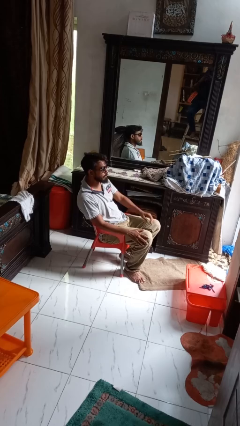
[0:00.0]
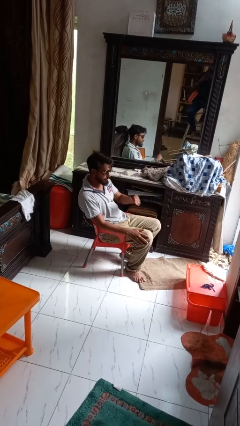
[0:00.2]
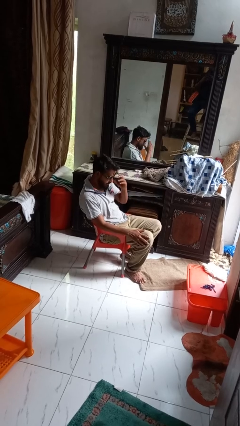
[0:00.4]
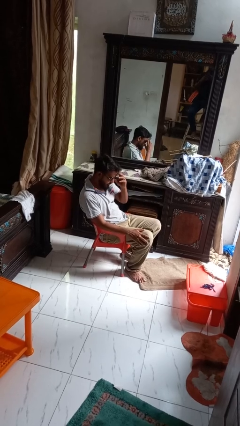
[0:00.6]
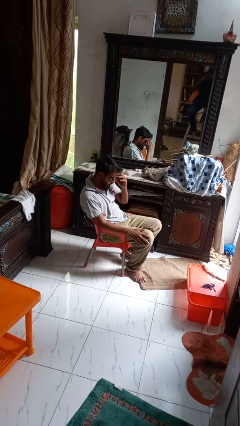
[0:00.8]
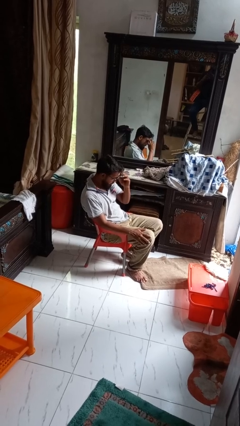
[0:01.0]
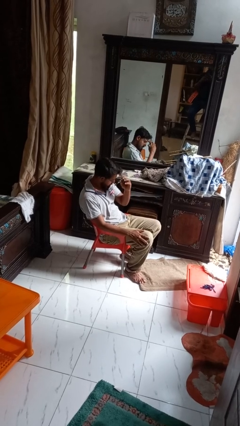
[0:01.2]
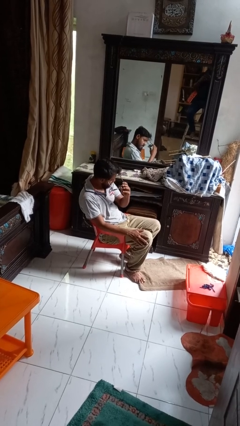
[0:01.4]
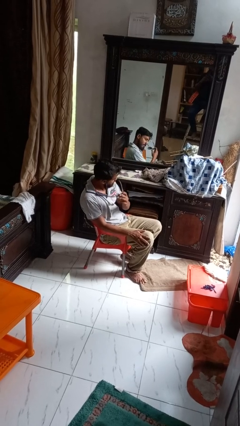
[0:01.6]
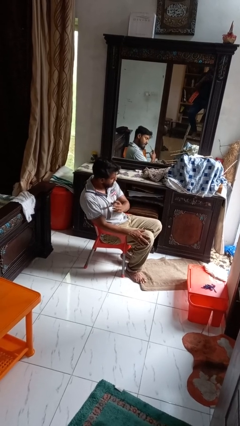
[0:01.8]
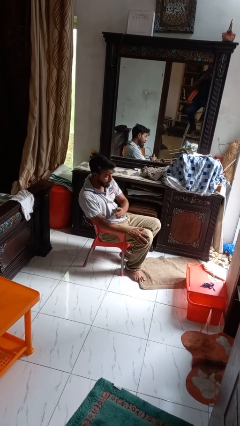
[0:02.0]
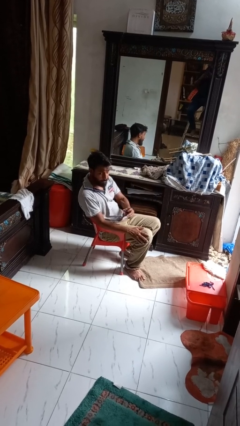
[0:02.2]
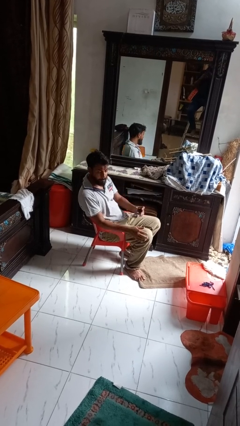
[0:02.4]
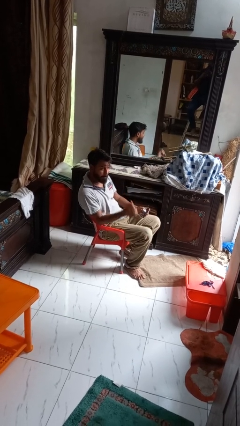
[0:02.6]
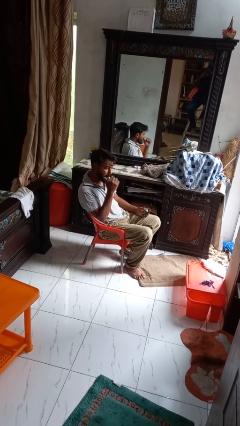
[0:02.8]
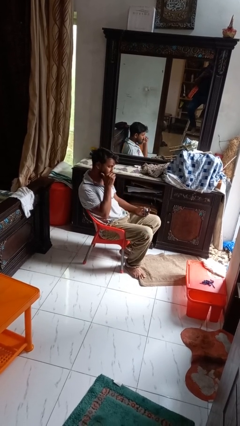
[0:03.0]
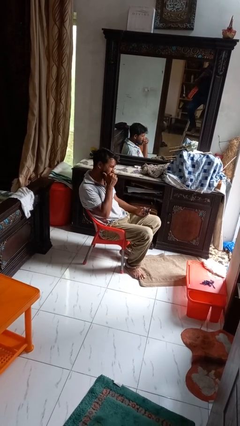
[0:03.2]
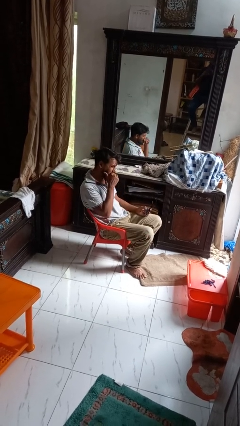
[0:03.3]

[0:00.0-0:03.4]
person takes off sunglasses

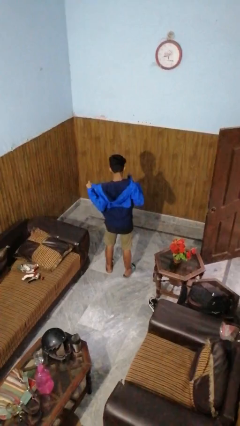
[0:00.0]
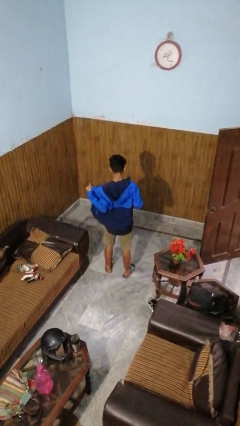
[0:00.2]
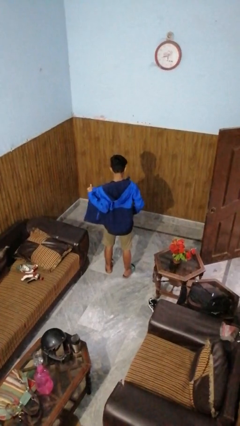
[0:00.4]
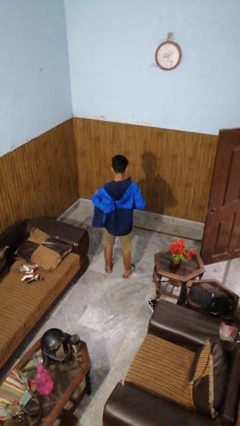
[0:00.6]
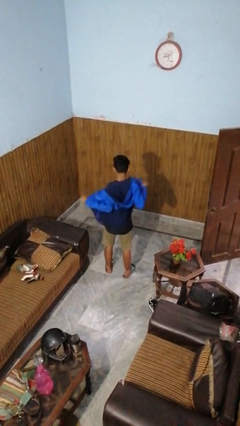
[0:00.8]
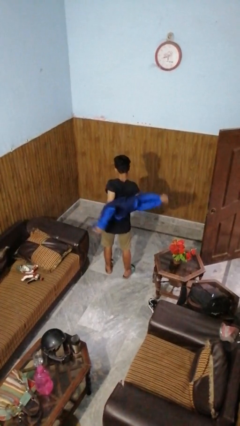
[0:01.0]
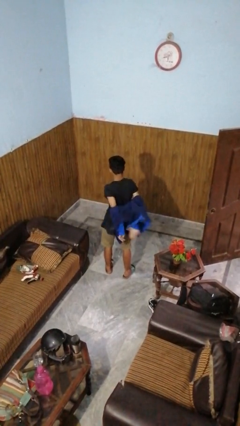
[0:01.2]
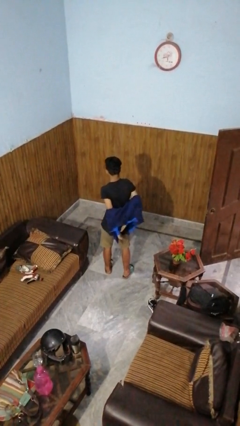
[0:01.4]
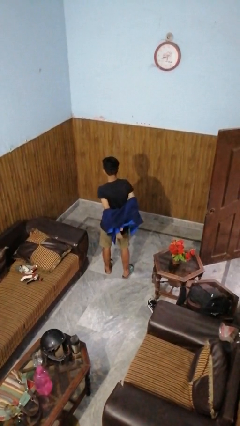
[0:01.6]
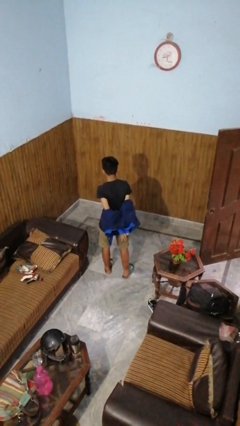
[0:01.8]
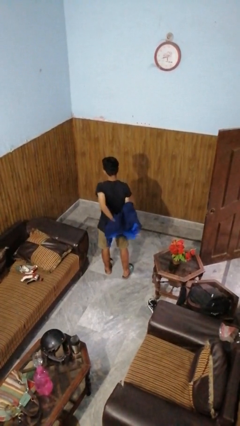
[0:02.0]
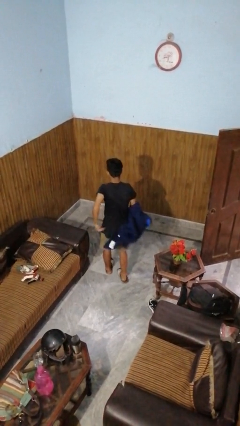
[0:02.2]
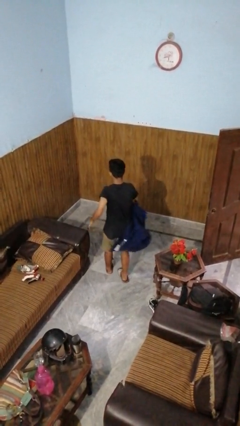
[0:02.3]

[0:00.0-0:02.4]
person takes off jacket

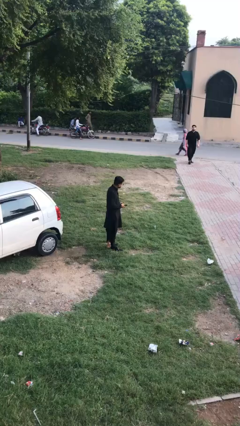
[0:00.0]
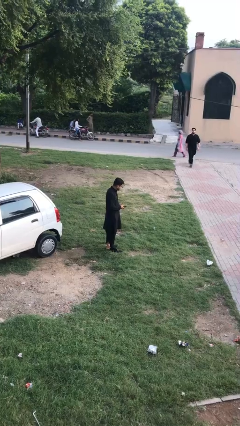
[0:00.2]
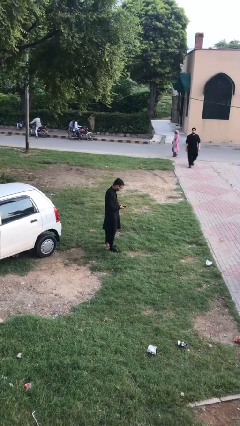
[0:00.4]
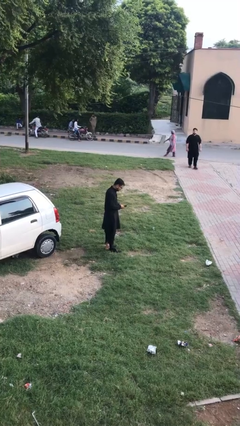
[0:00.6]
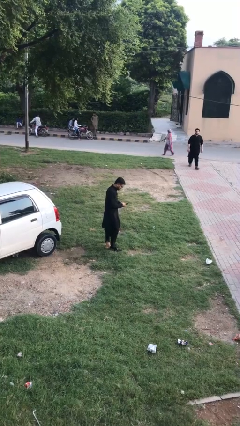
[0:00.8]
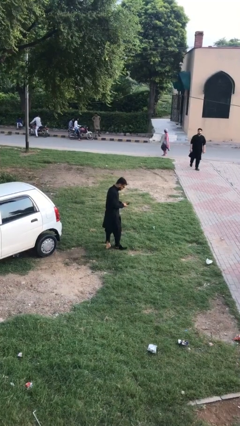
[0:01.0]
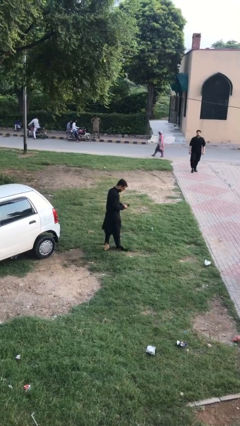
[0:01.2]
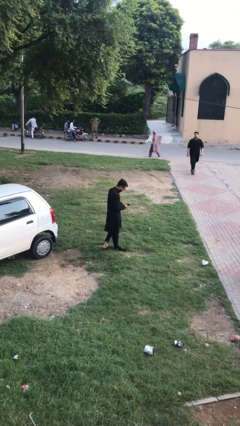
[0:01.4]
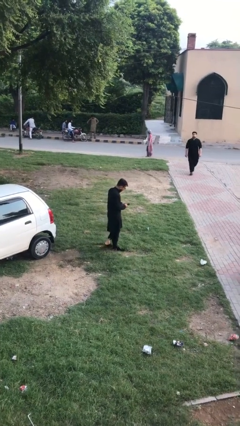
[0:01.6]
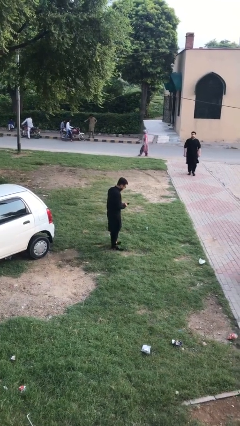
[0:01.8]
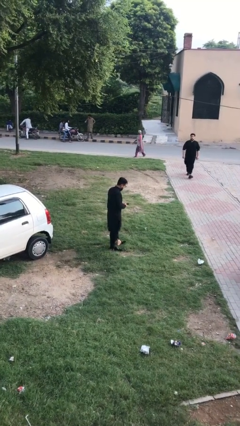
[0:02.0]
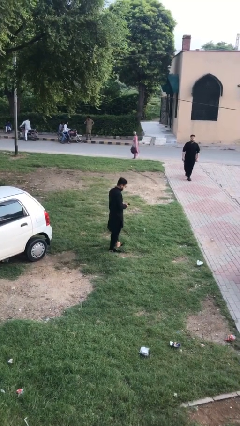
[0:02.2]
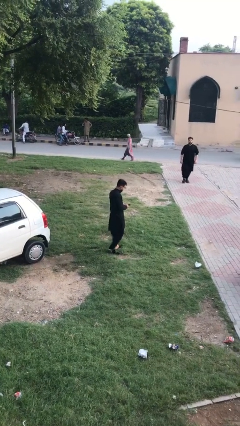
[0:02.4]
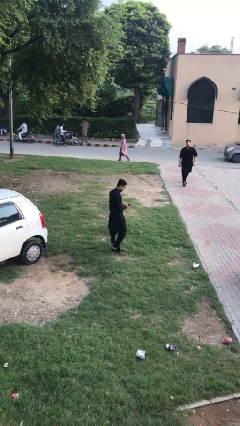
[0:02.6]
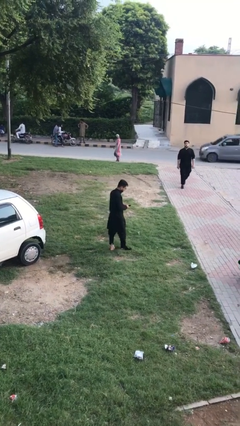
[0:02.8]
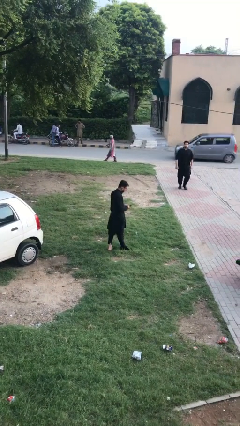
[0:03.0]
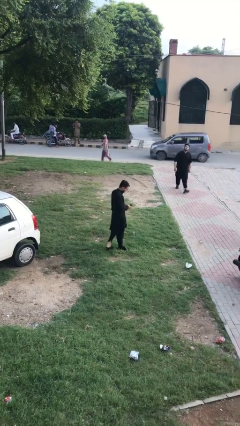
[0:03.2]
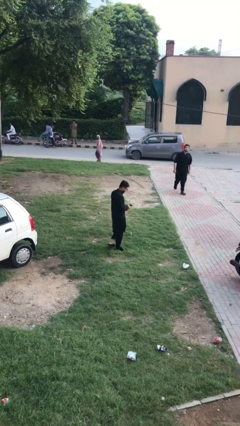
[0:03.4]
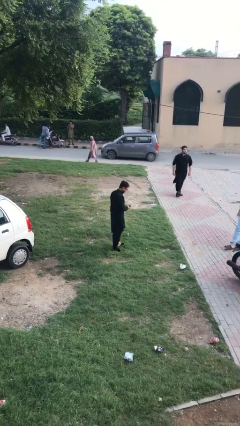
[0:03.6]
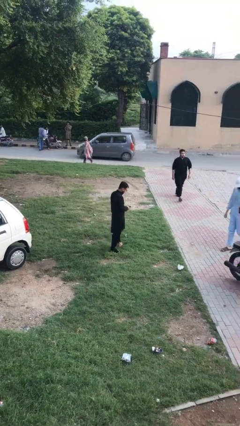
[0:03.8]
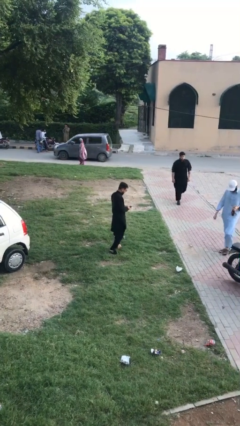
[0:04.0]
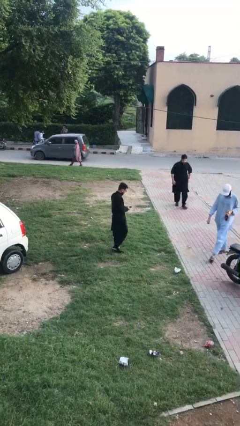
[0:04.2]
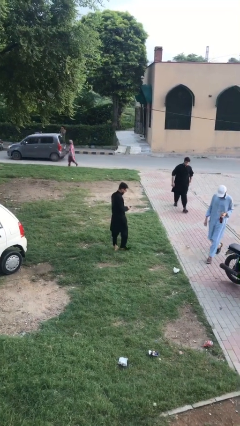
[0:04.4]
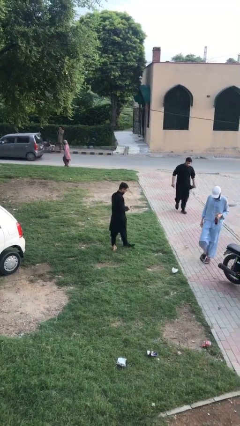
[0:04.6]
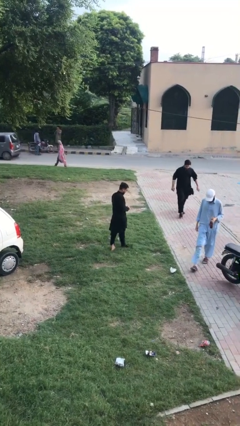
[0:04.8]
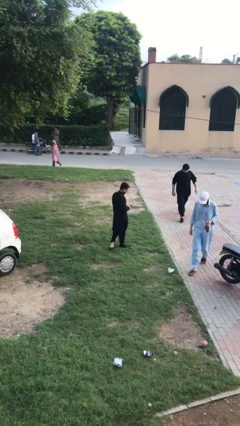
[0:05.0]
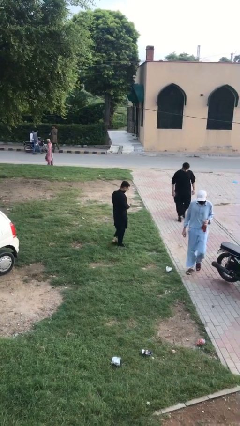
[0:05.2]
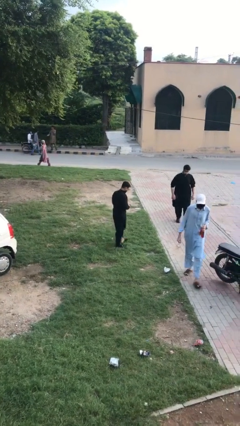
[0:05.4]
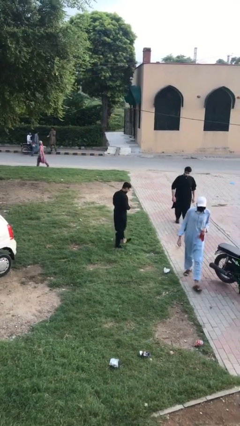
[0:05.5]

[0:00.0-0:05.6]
person texts on phone

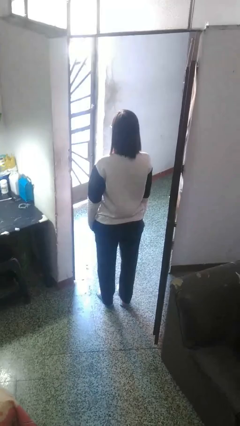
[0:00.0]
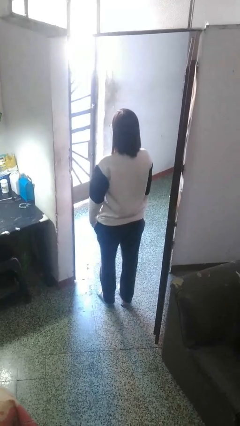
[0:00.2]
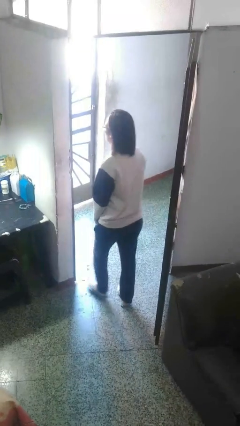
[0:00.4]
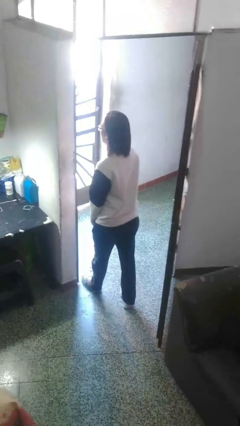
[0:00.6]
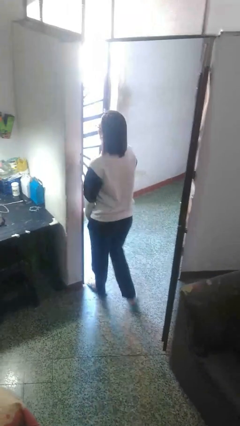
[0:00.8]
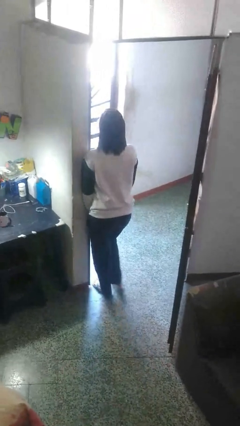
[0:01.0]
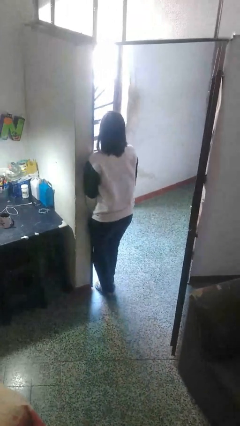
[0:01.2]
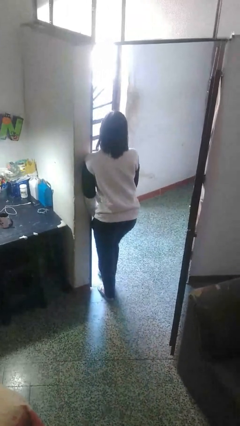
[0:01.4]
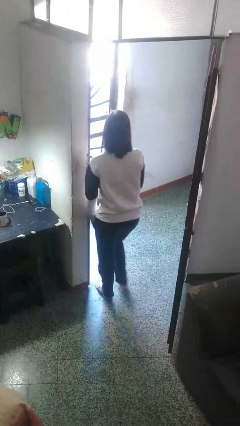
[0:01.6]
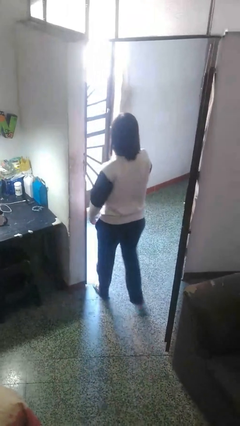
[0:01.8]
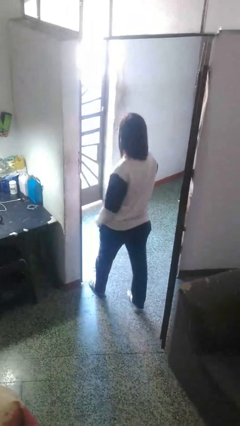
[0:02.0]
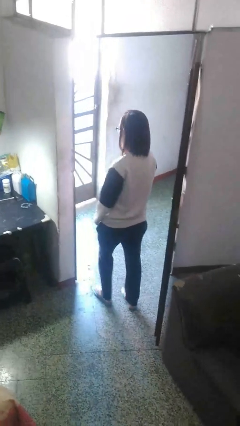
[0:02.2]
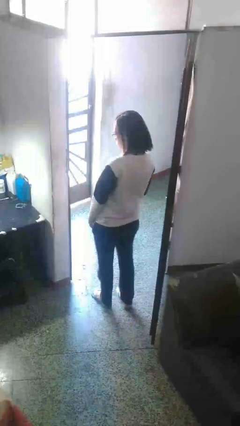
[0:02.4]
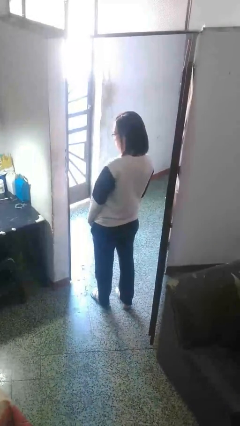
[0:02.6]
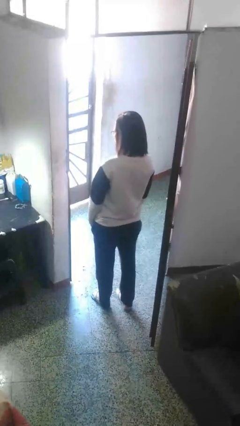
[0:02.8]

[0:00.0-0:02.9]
person bumps into wall

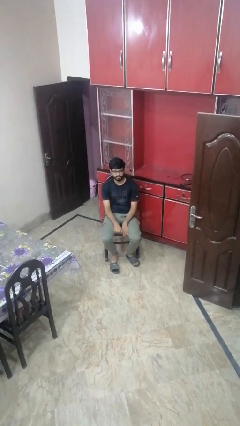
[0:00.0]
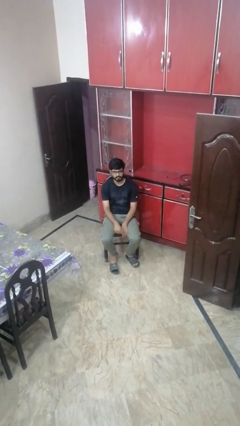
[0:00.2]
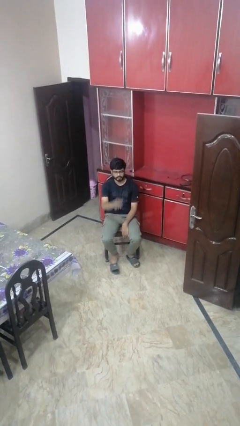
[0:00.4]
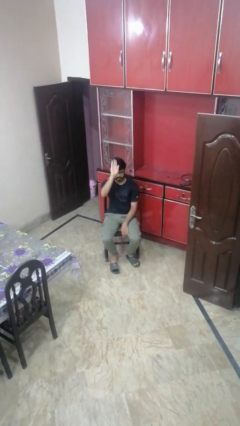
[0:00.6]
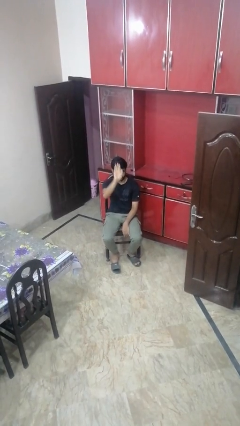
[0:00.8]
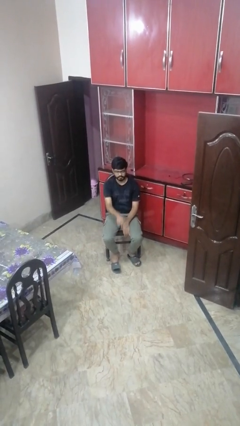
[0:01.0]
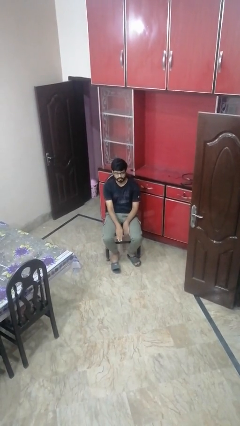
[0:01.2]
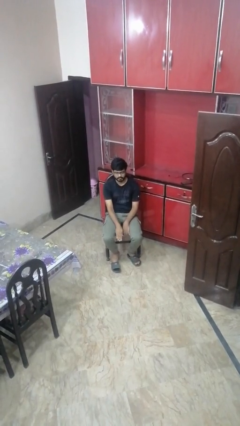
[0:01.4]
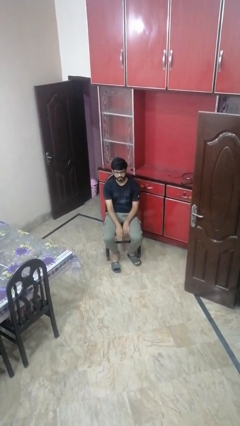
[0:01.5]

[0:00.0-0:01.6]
person gestures swipe down

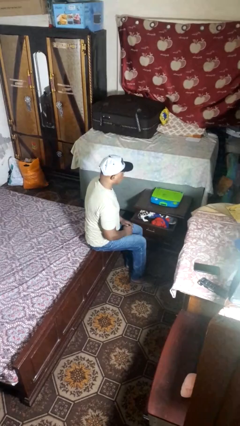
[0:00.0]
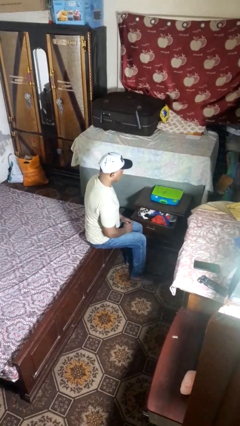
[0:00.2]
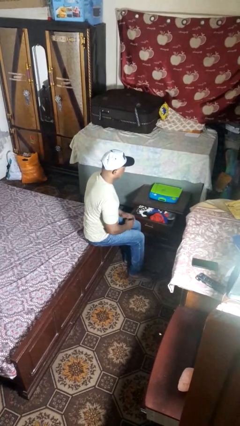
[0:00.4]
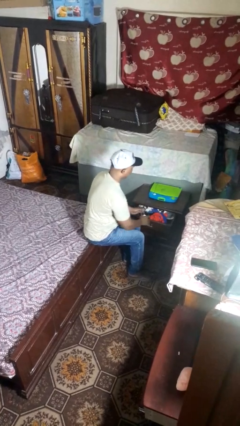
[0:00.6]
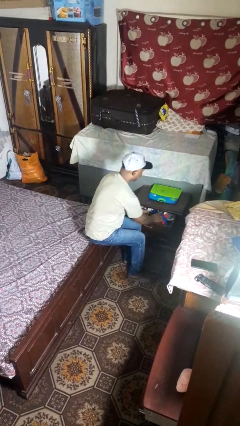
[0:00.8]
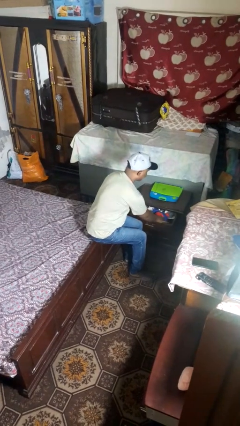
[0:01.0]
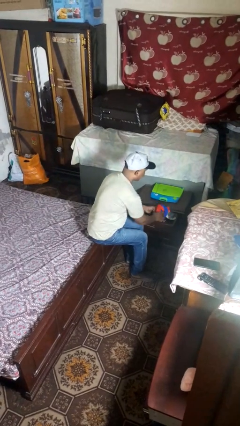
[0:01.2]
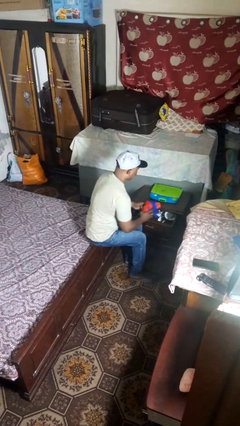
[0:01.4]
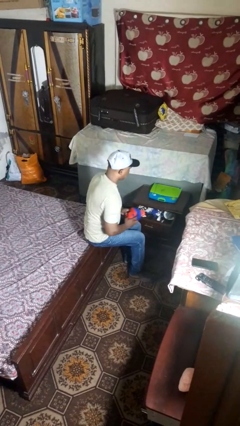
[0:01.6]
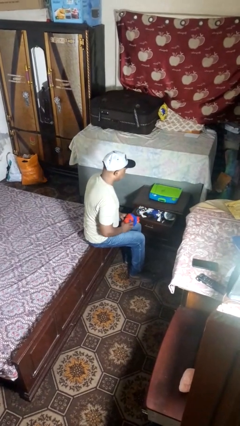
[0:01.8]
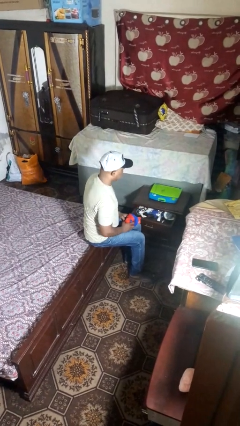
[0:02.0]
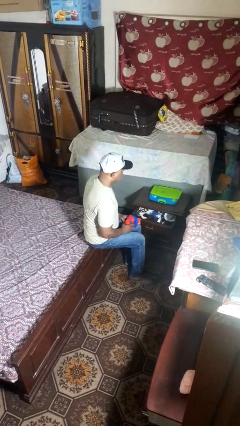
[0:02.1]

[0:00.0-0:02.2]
person takes clothes from dresser
